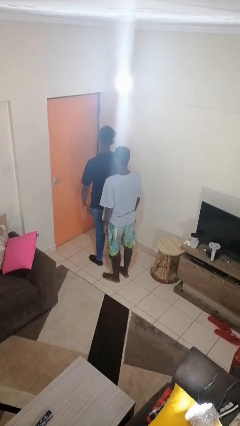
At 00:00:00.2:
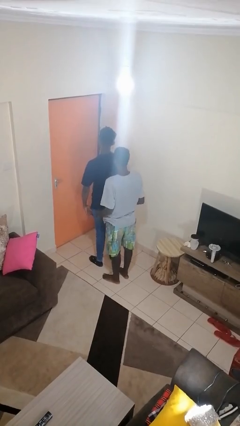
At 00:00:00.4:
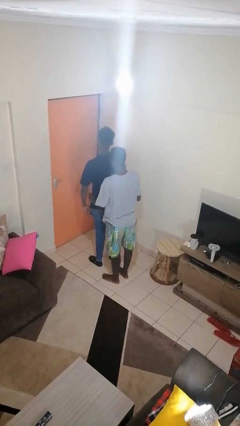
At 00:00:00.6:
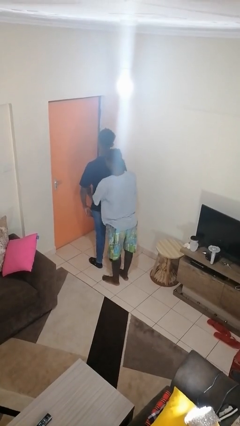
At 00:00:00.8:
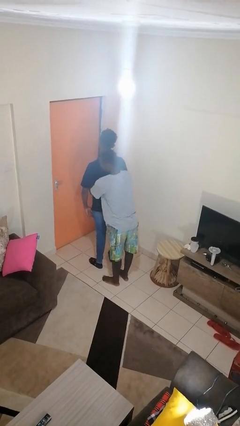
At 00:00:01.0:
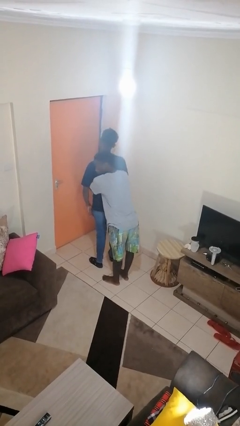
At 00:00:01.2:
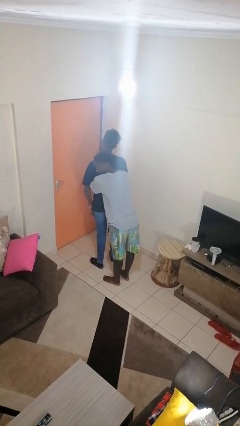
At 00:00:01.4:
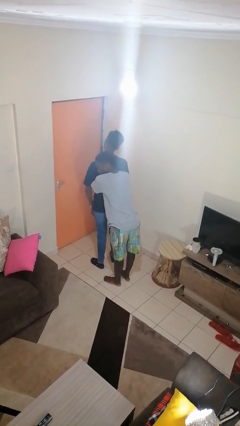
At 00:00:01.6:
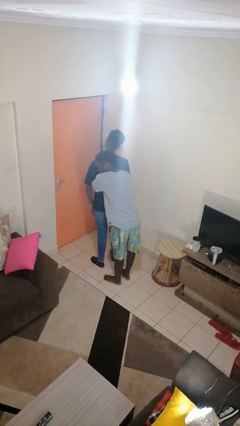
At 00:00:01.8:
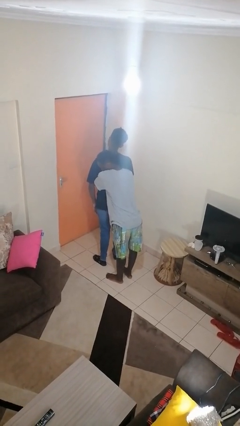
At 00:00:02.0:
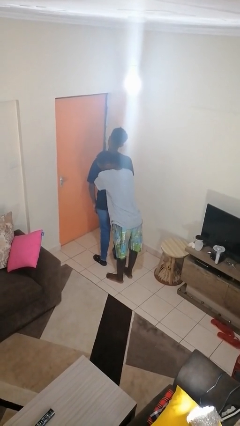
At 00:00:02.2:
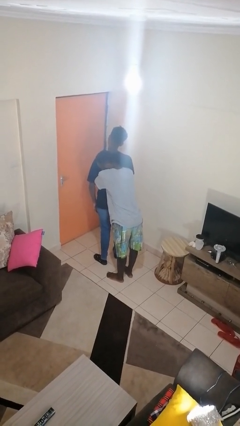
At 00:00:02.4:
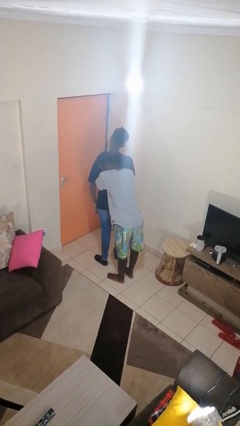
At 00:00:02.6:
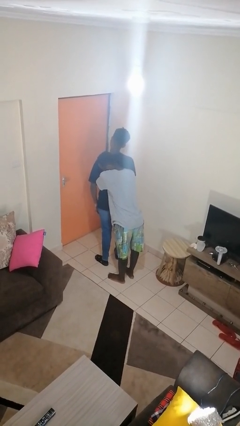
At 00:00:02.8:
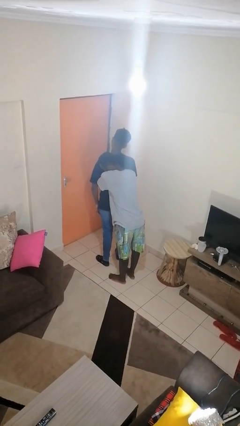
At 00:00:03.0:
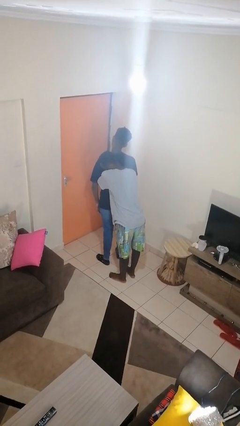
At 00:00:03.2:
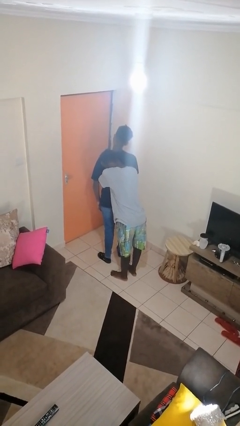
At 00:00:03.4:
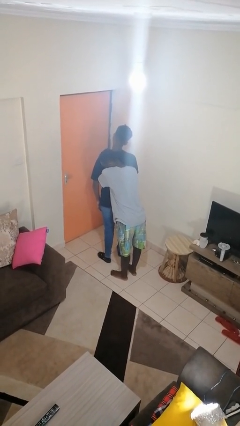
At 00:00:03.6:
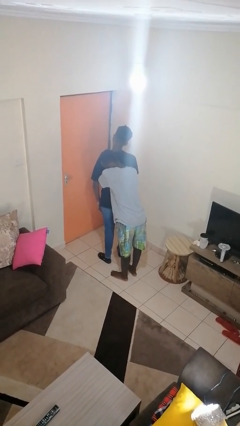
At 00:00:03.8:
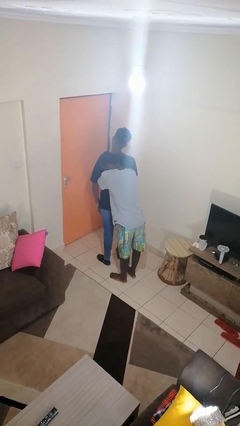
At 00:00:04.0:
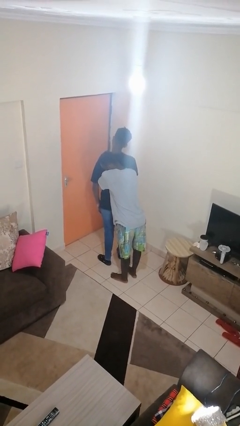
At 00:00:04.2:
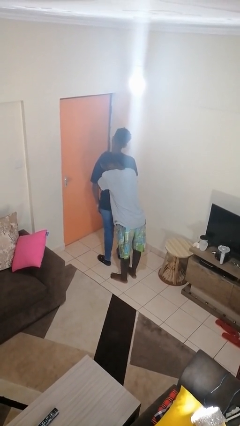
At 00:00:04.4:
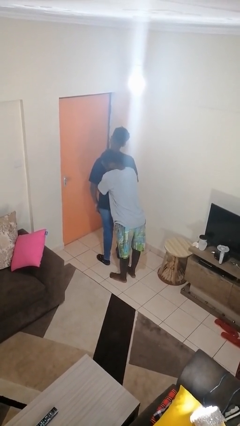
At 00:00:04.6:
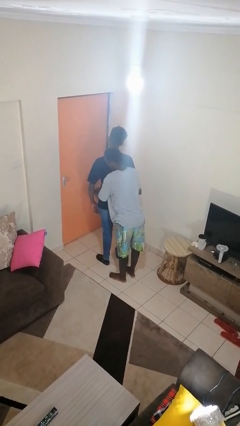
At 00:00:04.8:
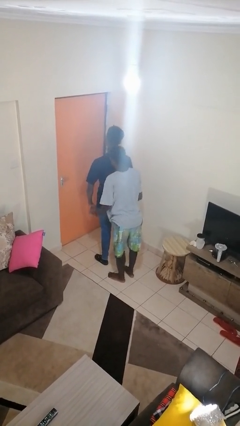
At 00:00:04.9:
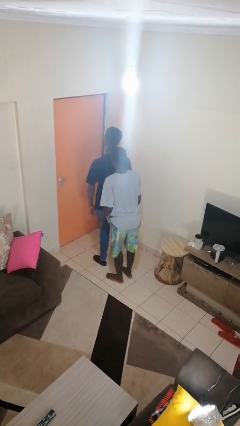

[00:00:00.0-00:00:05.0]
person hugs person from behind

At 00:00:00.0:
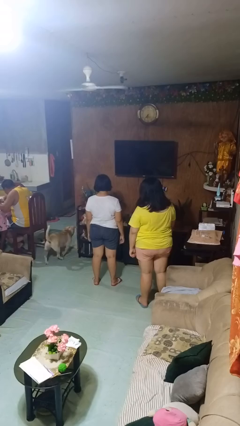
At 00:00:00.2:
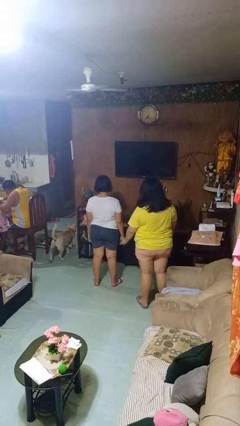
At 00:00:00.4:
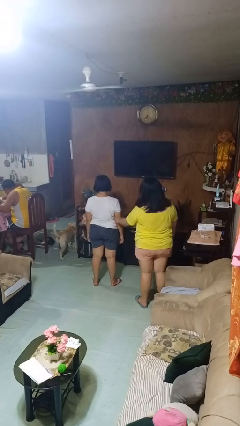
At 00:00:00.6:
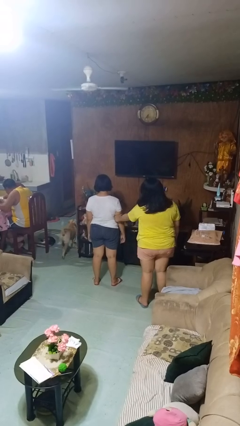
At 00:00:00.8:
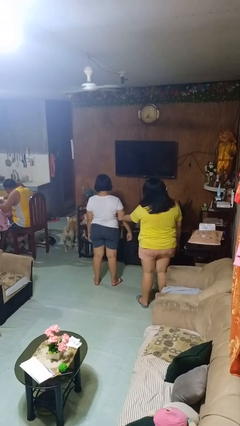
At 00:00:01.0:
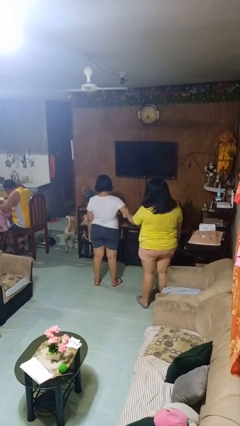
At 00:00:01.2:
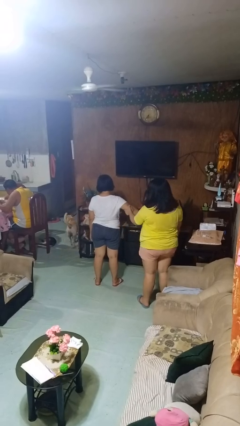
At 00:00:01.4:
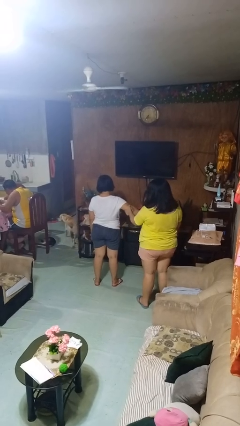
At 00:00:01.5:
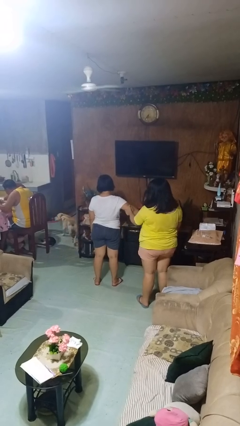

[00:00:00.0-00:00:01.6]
person grabs person by bicep

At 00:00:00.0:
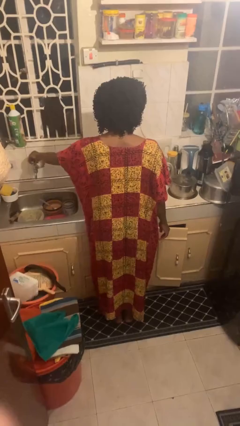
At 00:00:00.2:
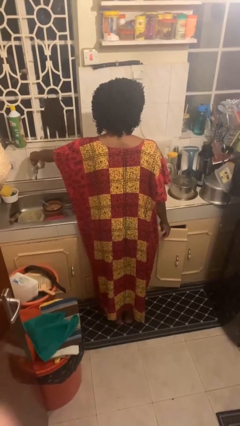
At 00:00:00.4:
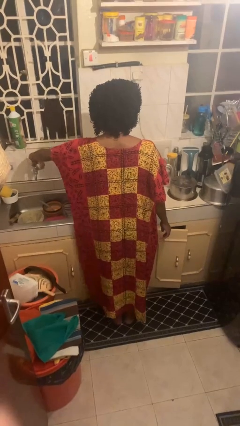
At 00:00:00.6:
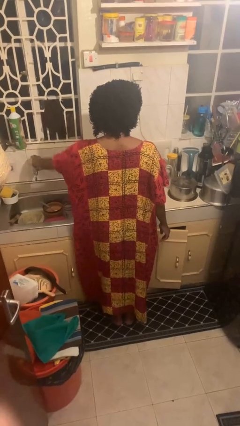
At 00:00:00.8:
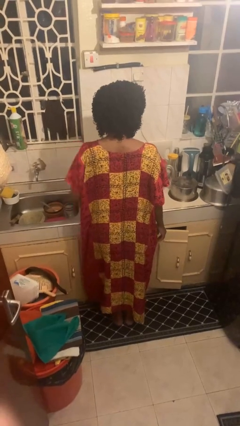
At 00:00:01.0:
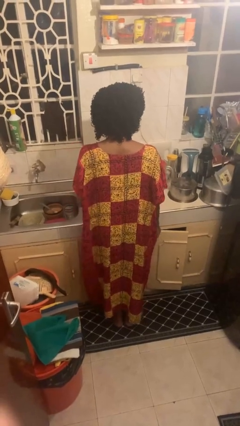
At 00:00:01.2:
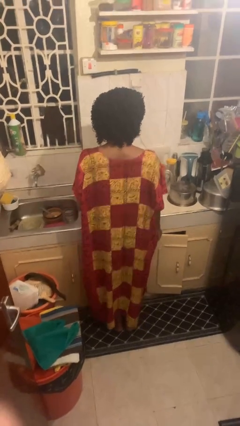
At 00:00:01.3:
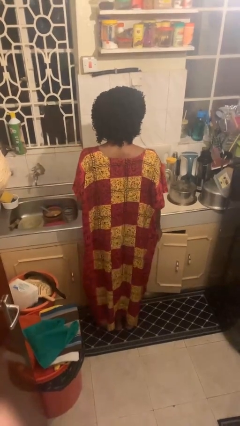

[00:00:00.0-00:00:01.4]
person turns off faucet

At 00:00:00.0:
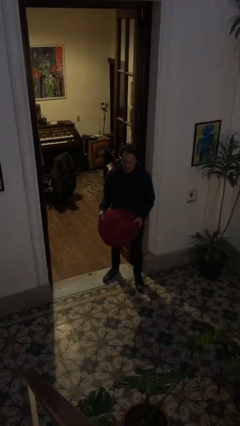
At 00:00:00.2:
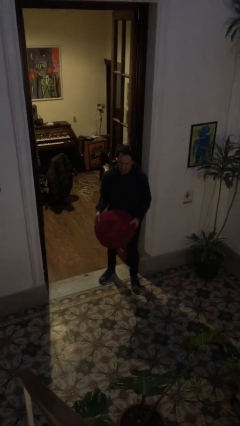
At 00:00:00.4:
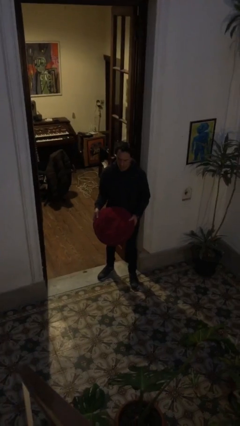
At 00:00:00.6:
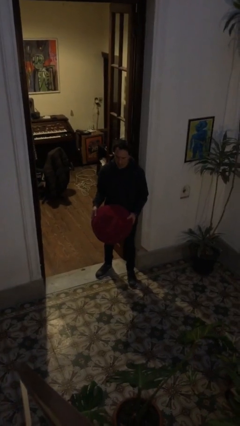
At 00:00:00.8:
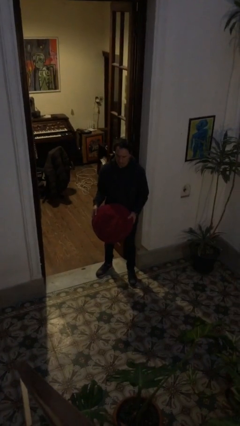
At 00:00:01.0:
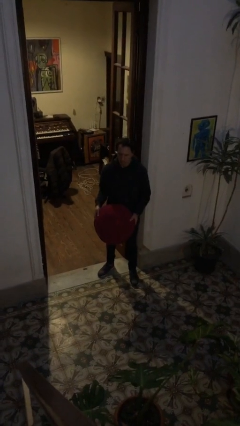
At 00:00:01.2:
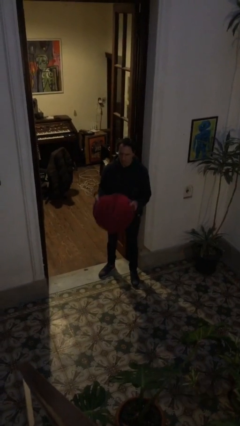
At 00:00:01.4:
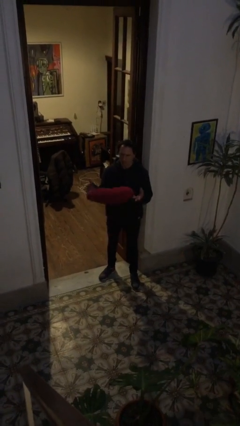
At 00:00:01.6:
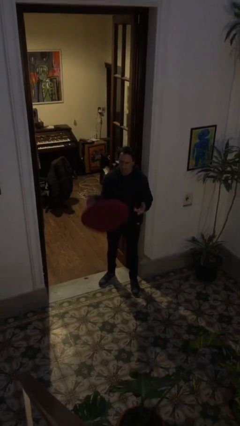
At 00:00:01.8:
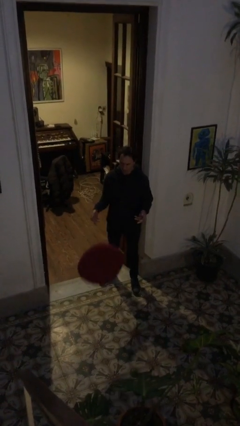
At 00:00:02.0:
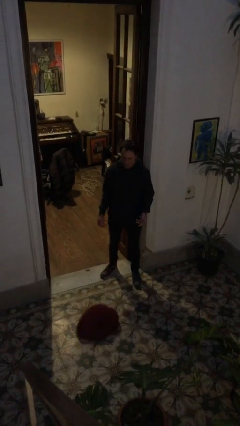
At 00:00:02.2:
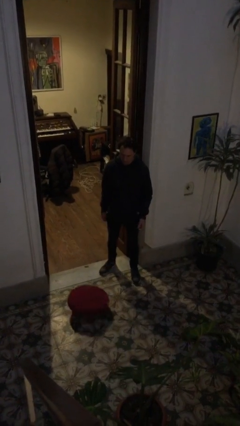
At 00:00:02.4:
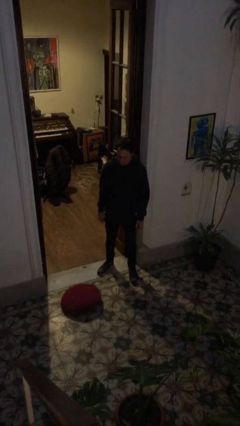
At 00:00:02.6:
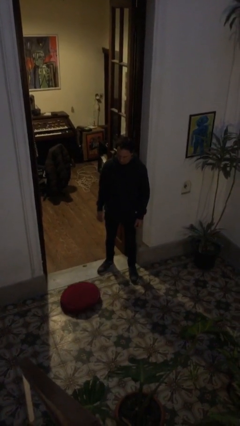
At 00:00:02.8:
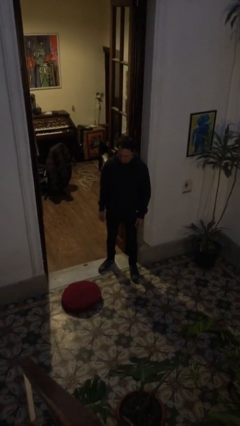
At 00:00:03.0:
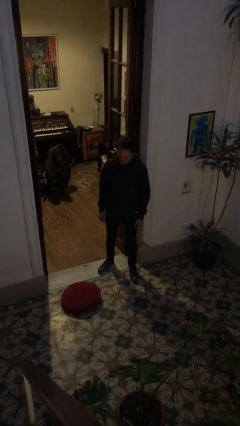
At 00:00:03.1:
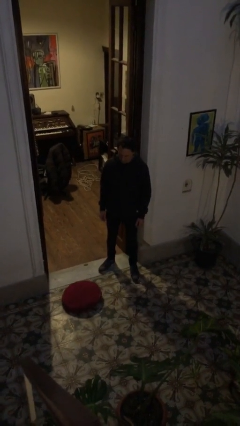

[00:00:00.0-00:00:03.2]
person throws object into air

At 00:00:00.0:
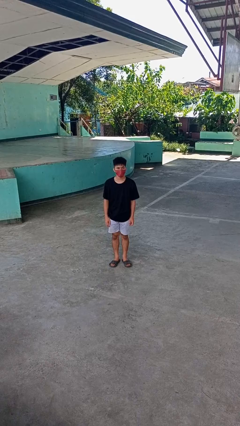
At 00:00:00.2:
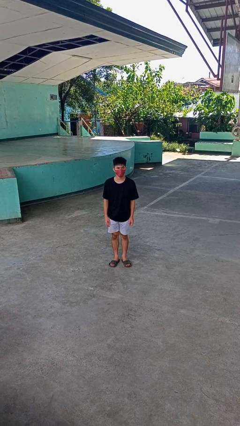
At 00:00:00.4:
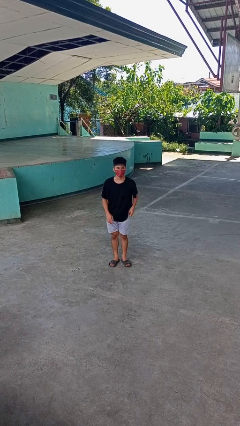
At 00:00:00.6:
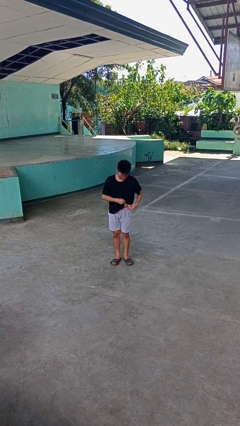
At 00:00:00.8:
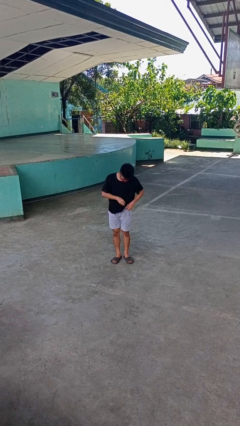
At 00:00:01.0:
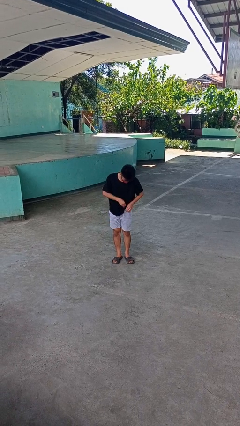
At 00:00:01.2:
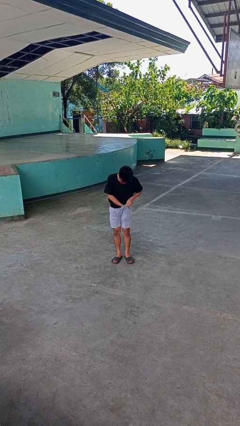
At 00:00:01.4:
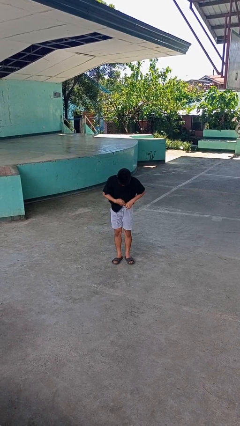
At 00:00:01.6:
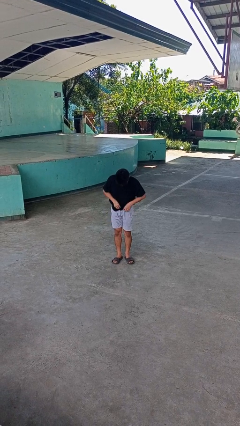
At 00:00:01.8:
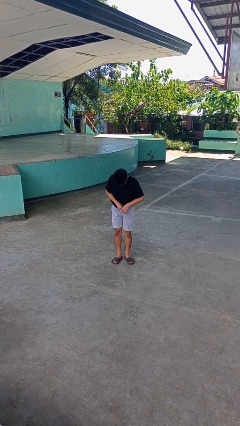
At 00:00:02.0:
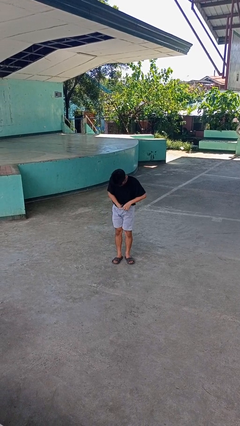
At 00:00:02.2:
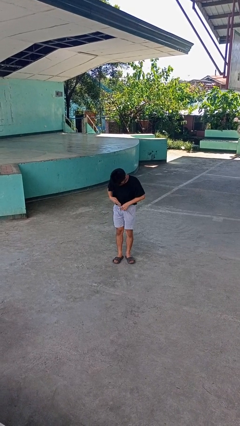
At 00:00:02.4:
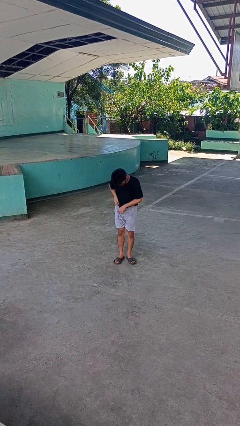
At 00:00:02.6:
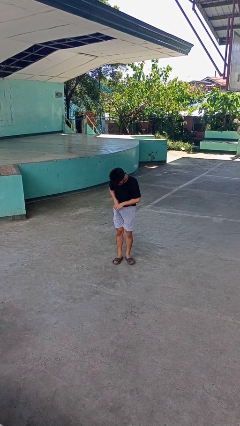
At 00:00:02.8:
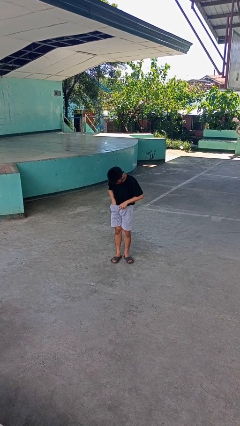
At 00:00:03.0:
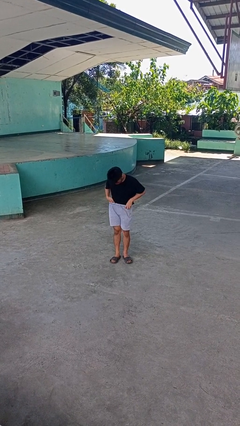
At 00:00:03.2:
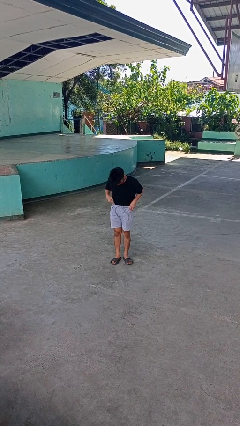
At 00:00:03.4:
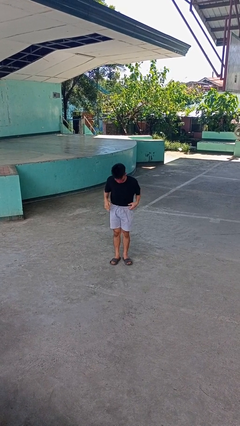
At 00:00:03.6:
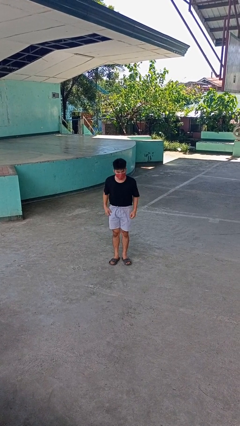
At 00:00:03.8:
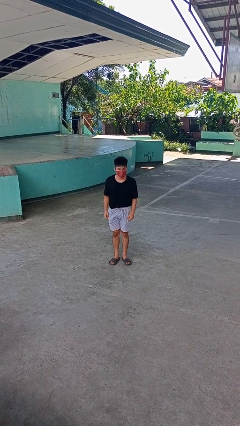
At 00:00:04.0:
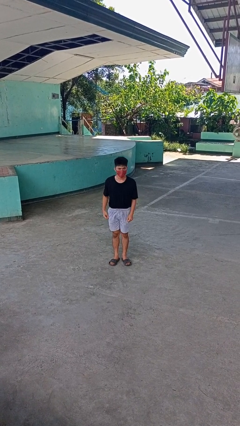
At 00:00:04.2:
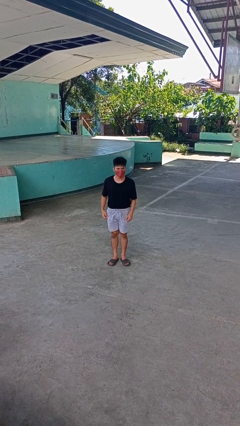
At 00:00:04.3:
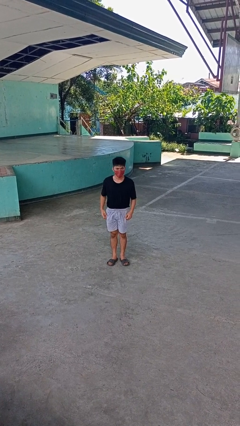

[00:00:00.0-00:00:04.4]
person tucks in shirt

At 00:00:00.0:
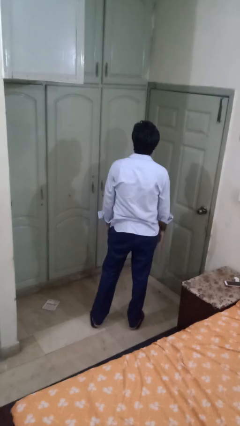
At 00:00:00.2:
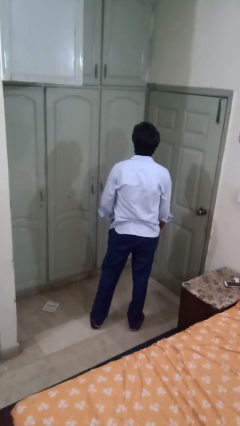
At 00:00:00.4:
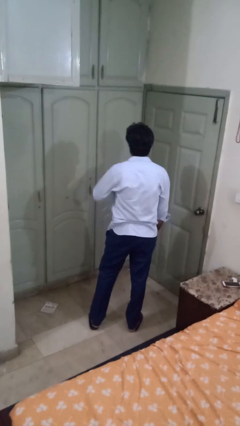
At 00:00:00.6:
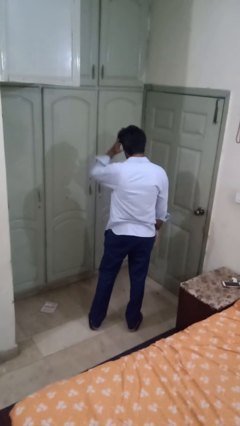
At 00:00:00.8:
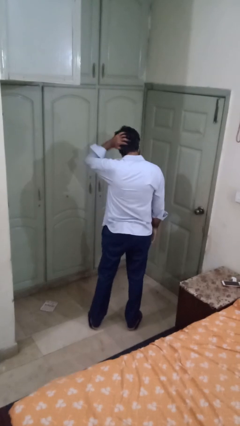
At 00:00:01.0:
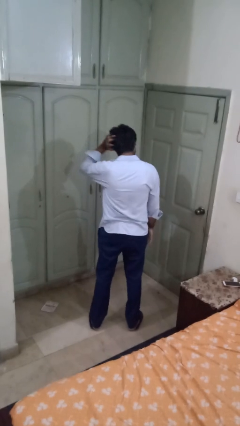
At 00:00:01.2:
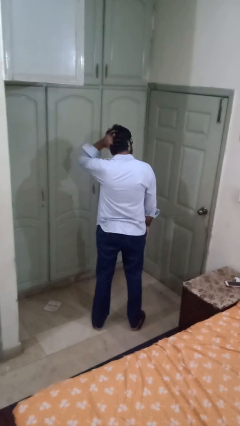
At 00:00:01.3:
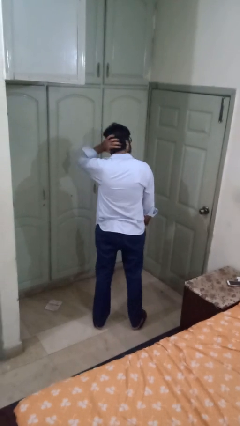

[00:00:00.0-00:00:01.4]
person strokes hair
